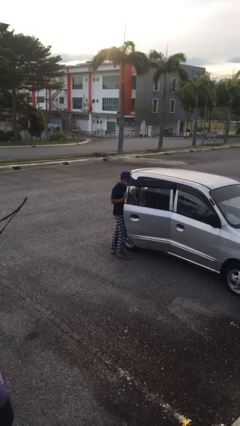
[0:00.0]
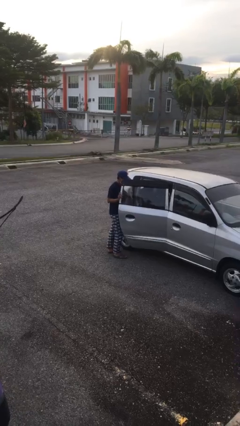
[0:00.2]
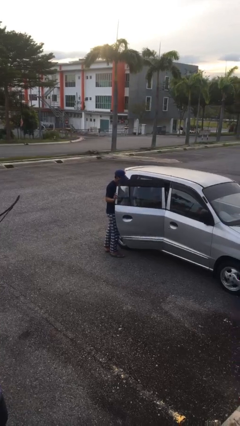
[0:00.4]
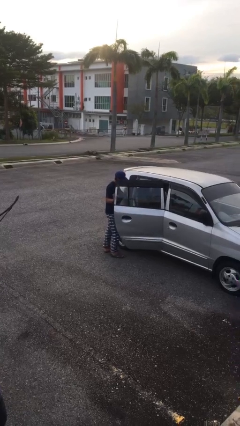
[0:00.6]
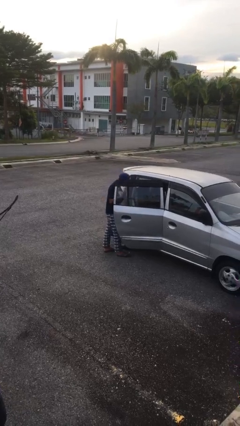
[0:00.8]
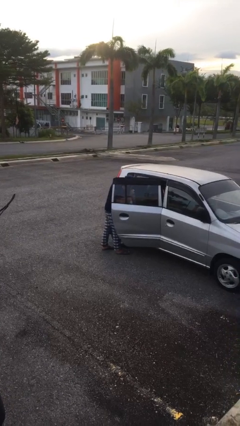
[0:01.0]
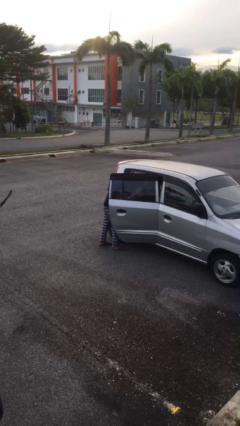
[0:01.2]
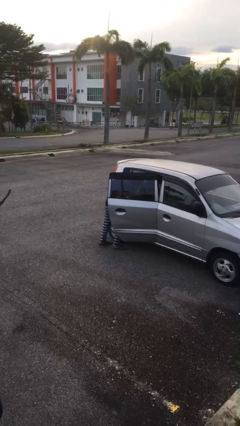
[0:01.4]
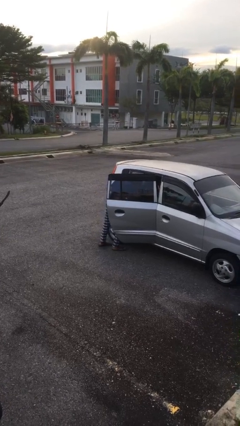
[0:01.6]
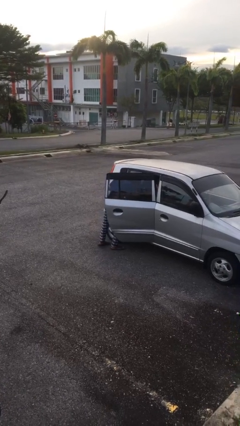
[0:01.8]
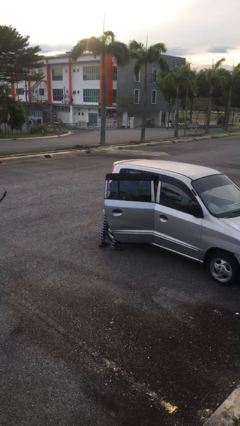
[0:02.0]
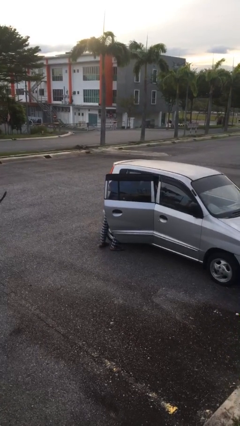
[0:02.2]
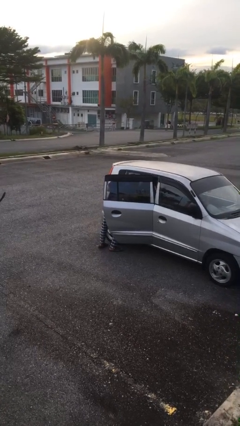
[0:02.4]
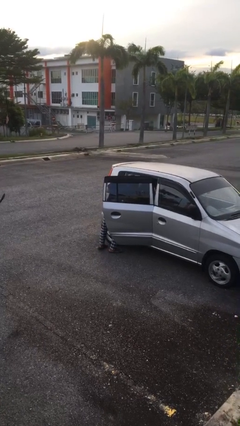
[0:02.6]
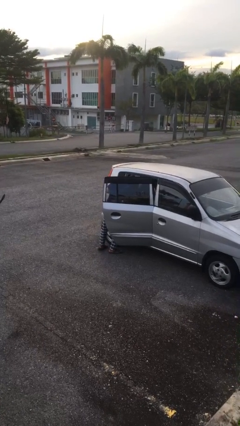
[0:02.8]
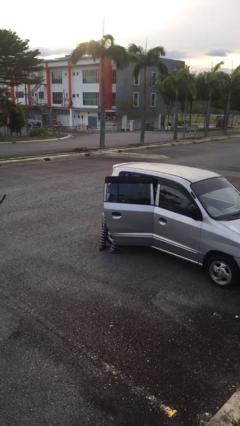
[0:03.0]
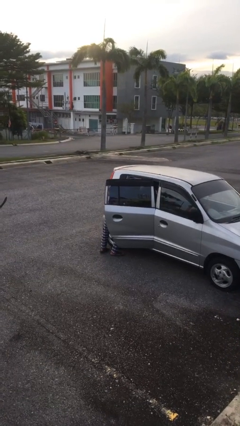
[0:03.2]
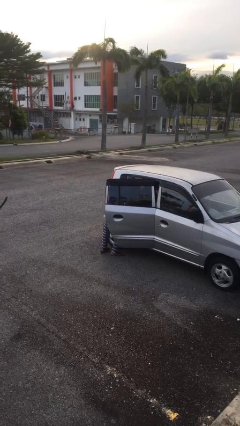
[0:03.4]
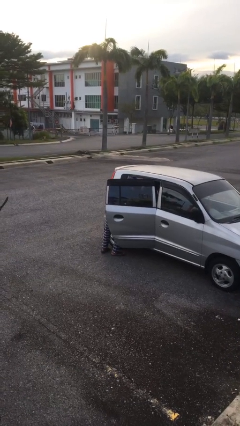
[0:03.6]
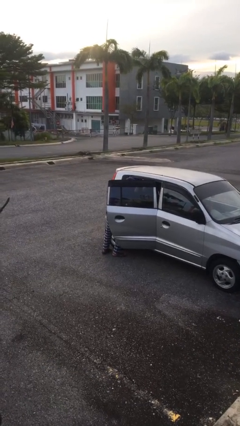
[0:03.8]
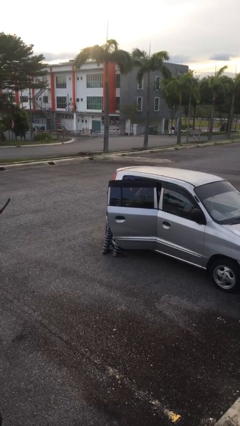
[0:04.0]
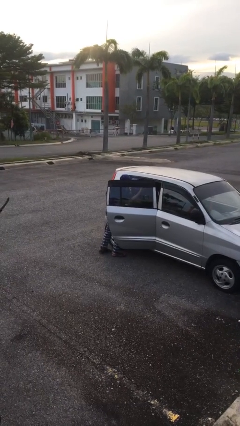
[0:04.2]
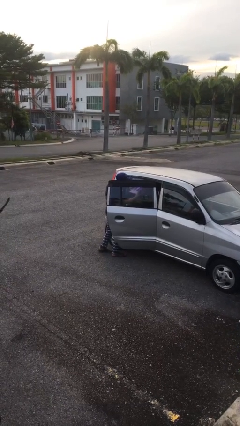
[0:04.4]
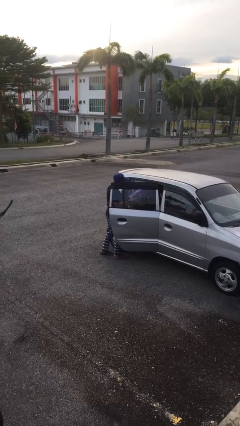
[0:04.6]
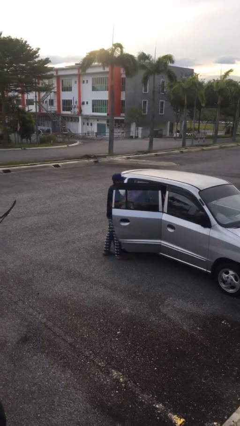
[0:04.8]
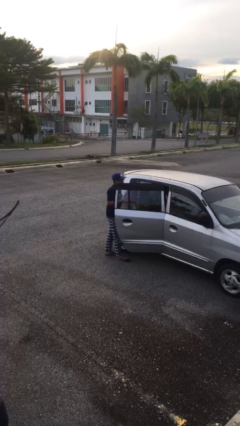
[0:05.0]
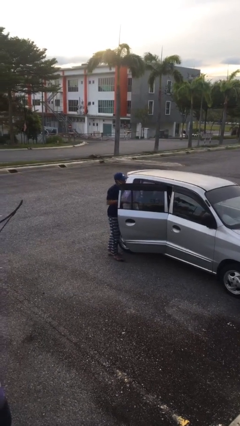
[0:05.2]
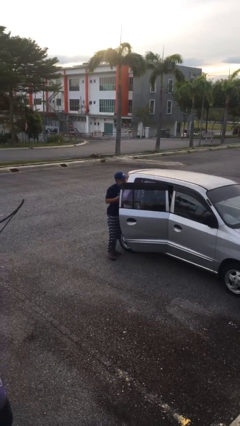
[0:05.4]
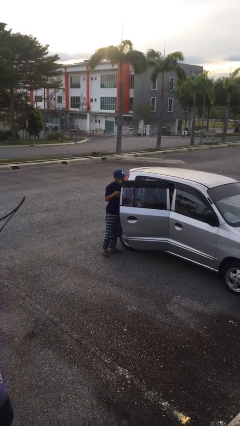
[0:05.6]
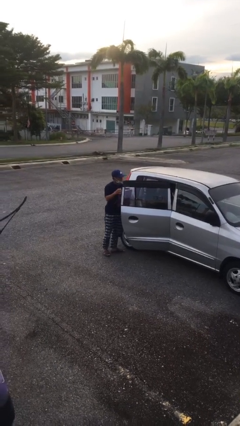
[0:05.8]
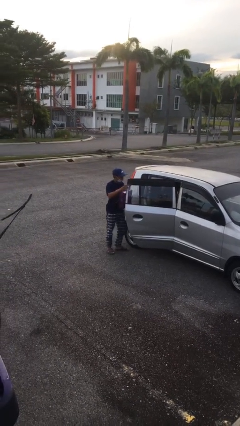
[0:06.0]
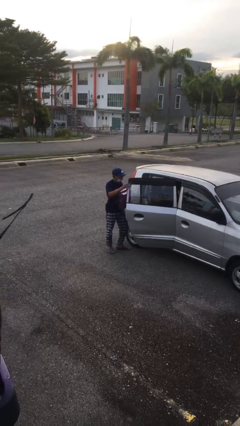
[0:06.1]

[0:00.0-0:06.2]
person unloads car

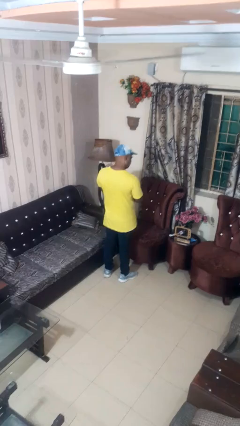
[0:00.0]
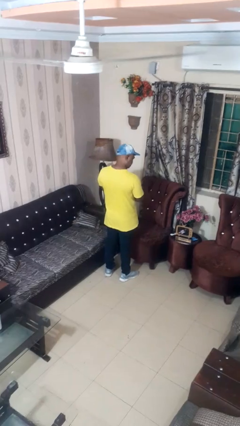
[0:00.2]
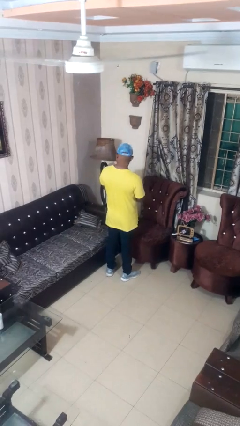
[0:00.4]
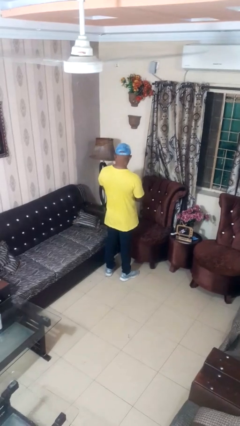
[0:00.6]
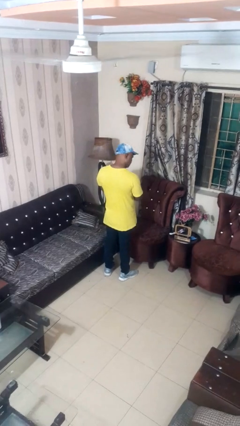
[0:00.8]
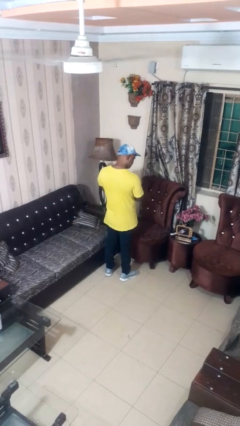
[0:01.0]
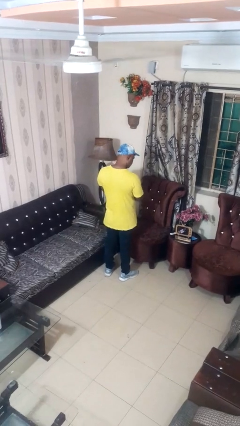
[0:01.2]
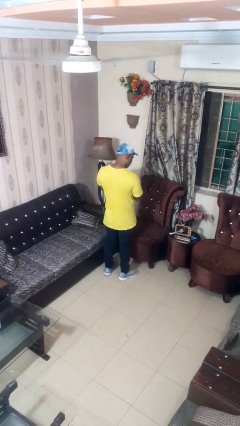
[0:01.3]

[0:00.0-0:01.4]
person nods head

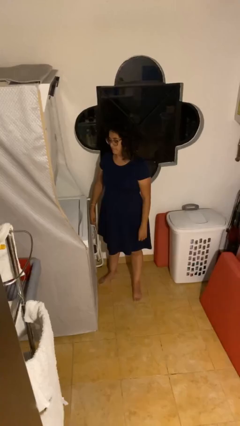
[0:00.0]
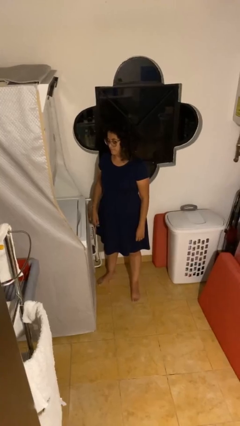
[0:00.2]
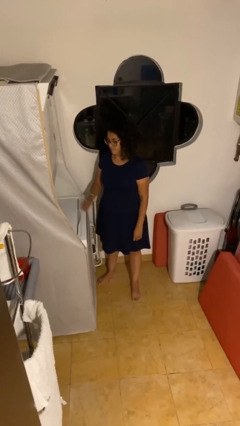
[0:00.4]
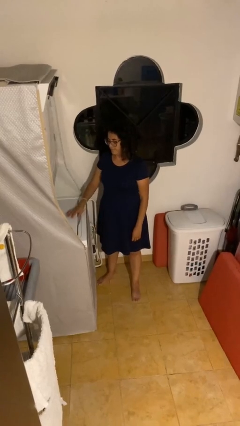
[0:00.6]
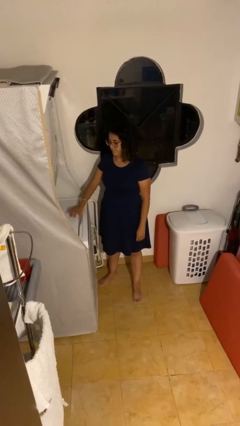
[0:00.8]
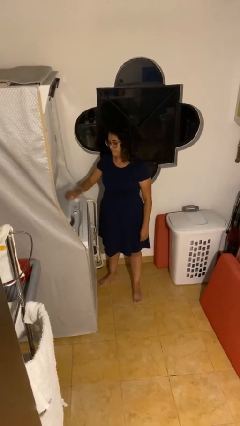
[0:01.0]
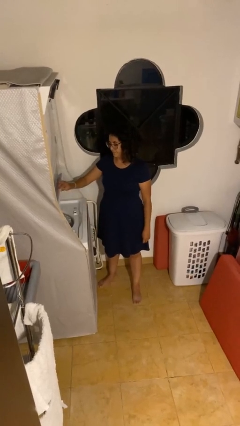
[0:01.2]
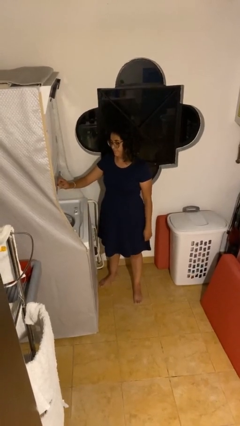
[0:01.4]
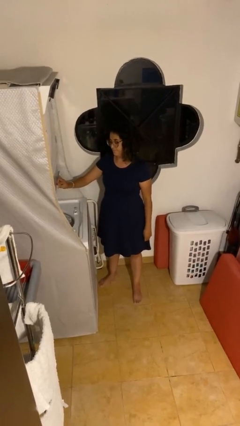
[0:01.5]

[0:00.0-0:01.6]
person opens clothes washer

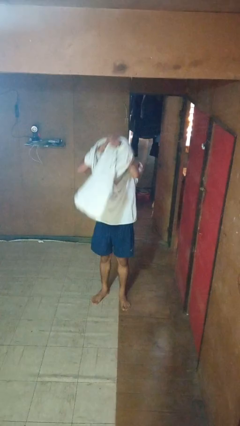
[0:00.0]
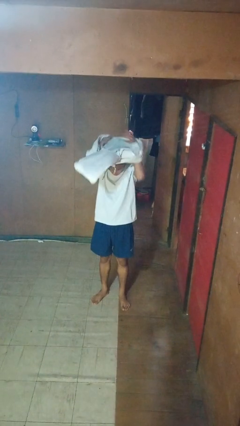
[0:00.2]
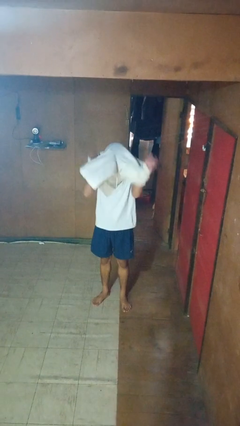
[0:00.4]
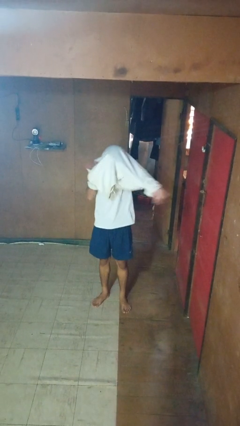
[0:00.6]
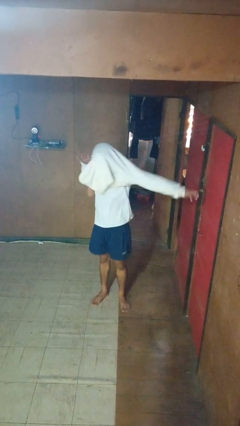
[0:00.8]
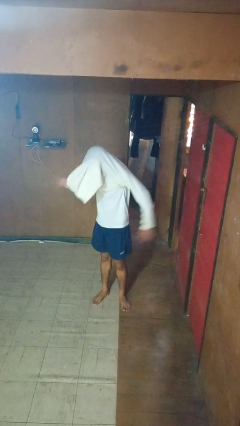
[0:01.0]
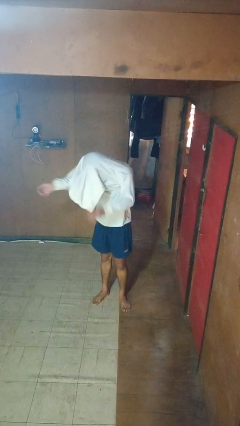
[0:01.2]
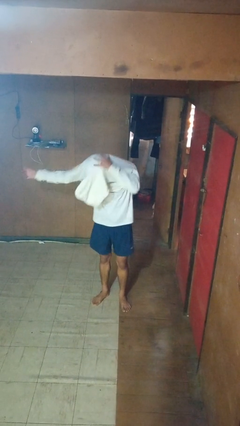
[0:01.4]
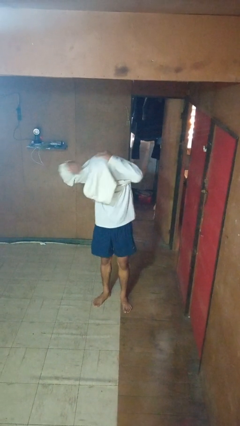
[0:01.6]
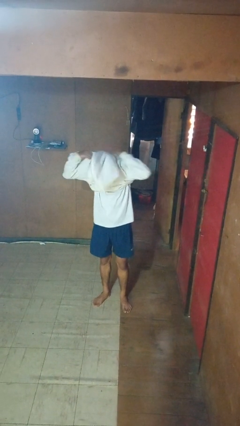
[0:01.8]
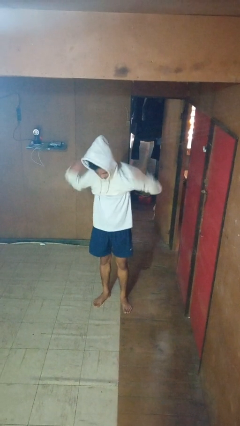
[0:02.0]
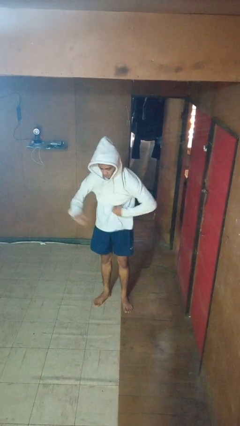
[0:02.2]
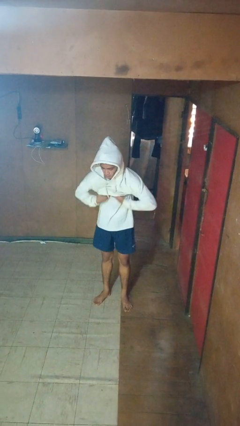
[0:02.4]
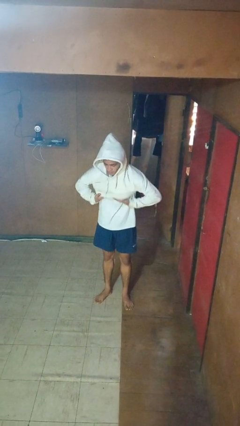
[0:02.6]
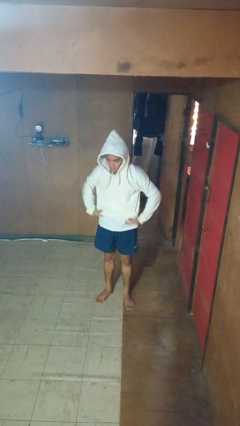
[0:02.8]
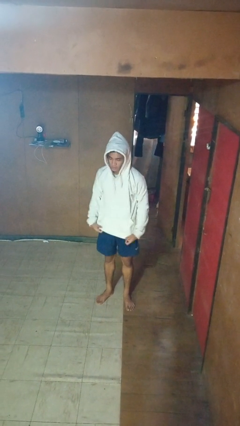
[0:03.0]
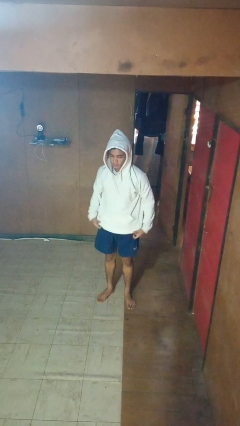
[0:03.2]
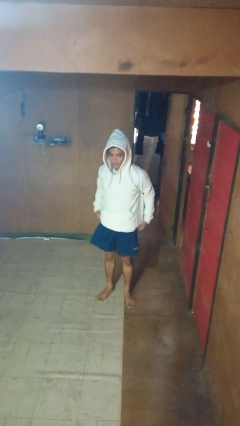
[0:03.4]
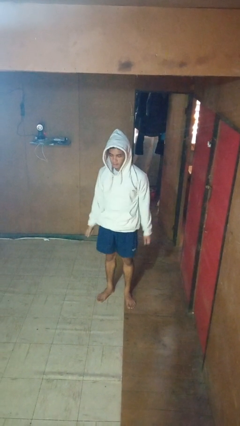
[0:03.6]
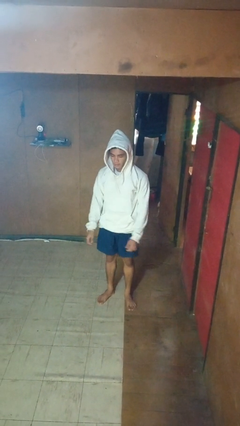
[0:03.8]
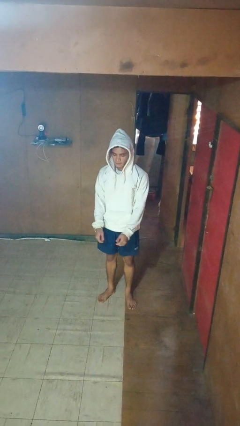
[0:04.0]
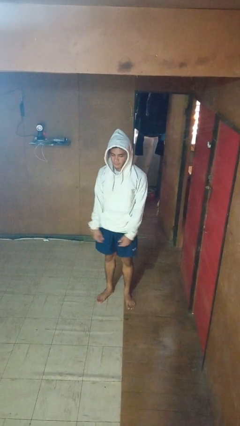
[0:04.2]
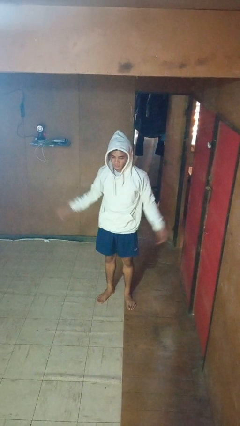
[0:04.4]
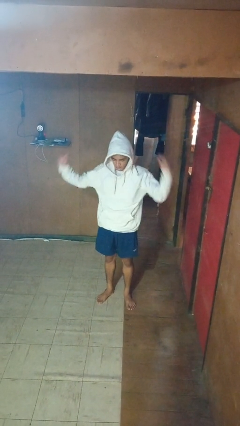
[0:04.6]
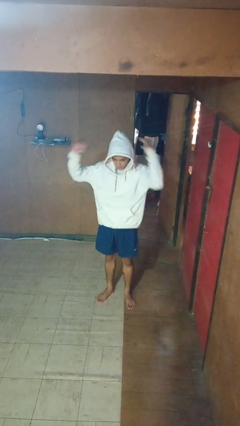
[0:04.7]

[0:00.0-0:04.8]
person puts on hoodie

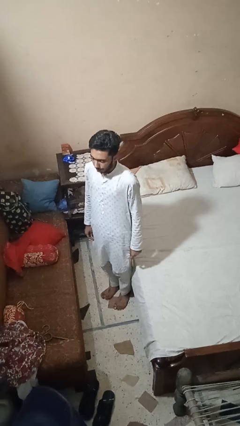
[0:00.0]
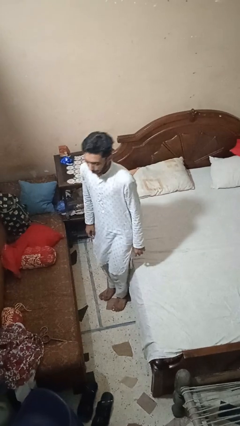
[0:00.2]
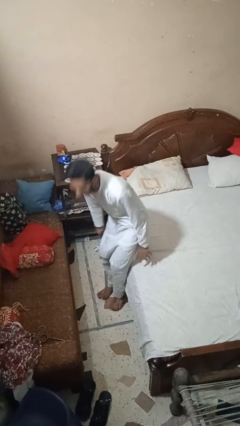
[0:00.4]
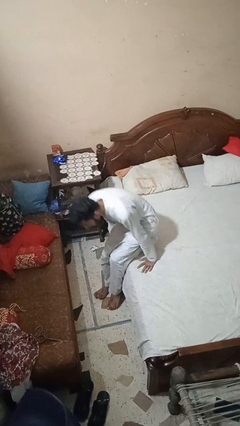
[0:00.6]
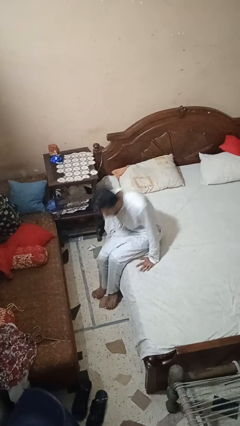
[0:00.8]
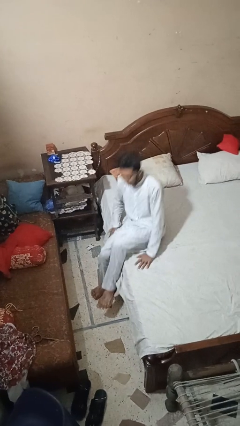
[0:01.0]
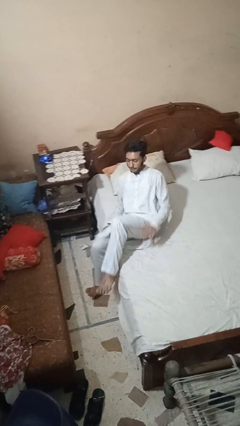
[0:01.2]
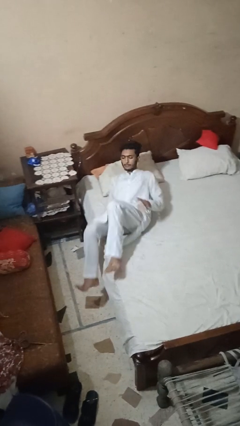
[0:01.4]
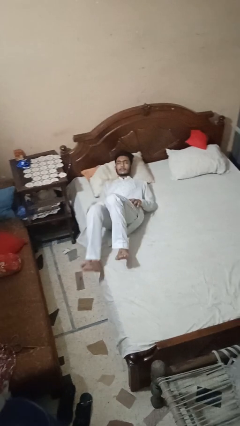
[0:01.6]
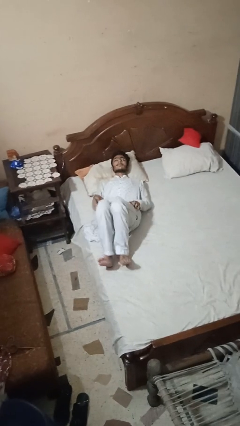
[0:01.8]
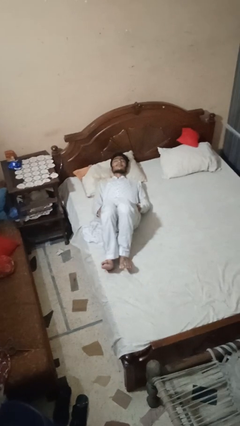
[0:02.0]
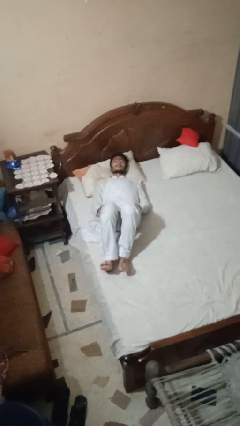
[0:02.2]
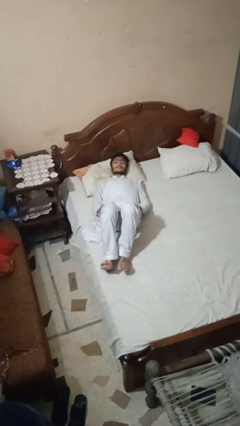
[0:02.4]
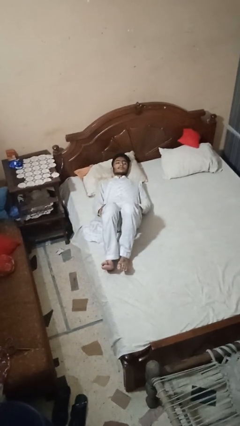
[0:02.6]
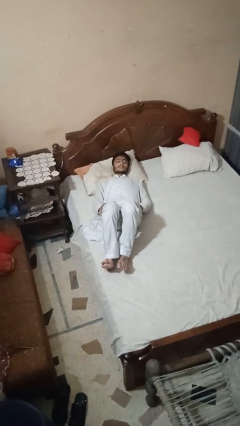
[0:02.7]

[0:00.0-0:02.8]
person lies down on bed

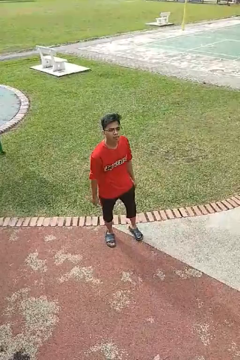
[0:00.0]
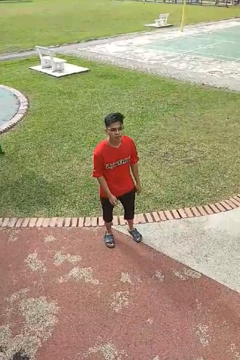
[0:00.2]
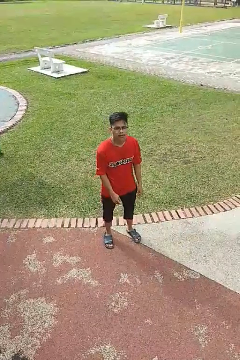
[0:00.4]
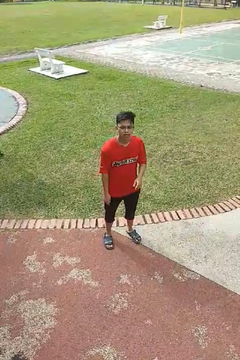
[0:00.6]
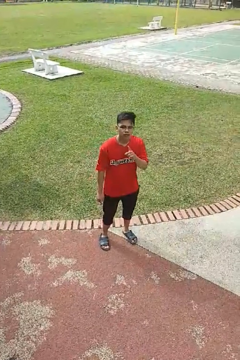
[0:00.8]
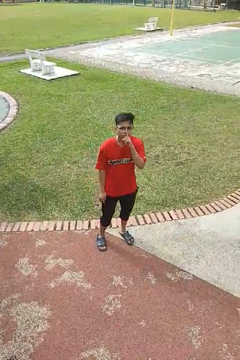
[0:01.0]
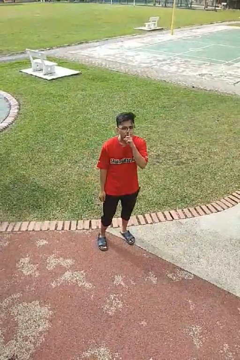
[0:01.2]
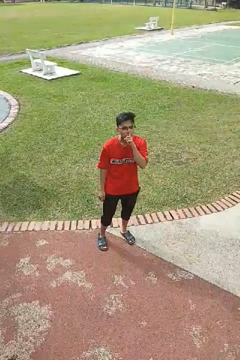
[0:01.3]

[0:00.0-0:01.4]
person gestures be quiet
